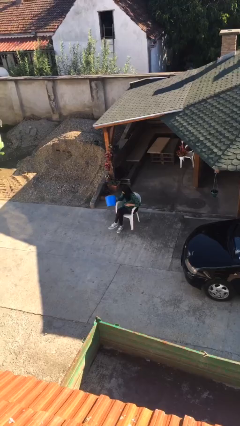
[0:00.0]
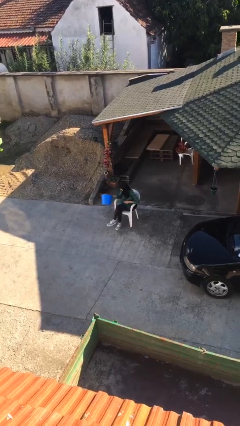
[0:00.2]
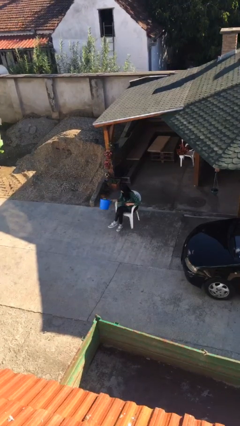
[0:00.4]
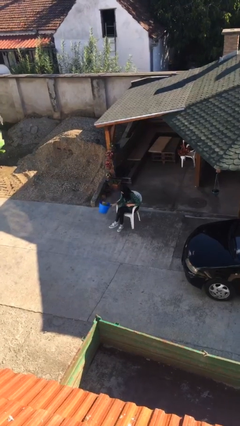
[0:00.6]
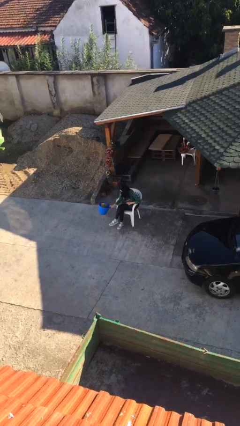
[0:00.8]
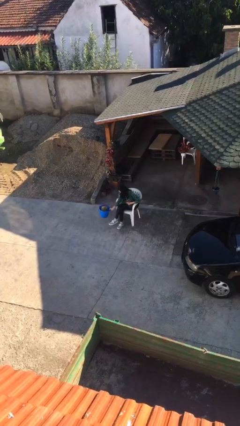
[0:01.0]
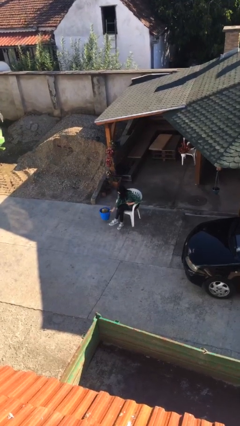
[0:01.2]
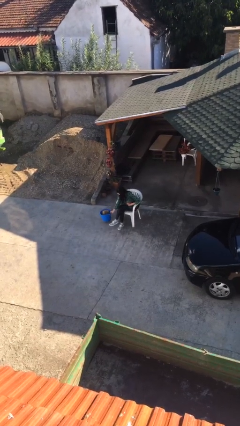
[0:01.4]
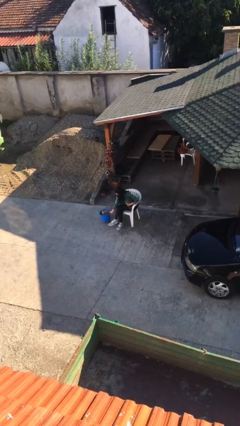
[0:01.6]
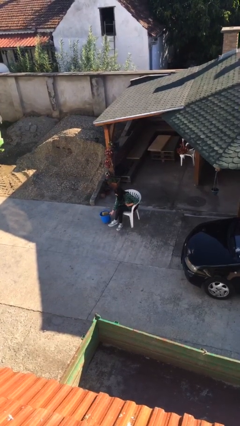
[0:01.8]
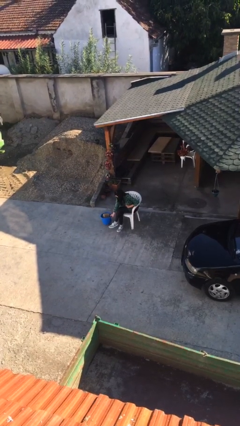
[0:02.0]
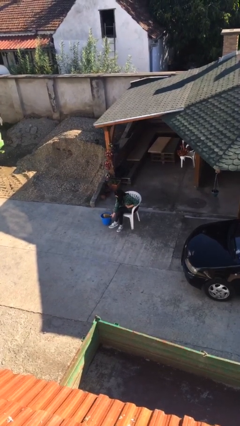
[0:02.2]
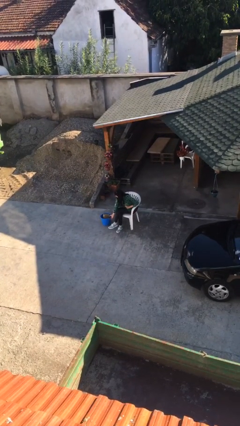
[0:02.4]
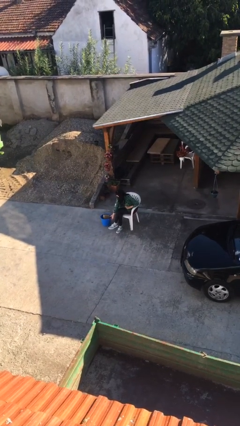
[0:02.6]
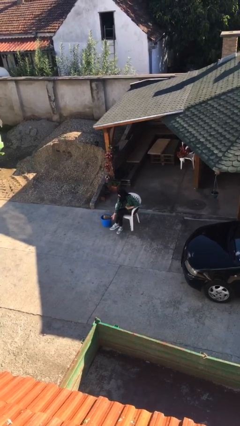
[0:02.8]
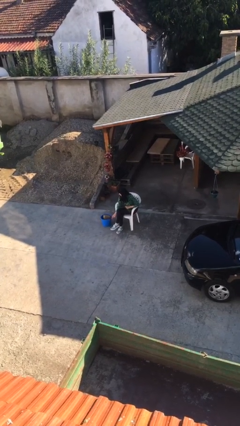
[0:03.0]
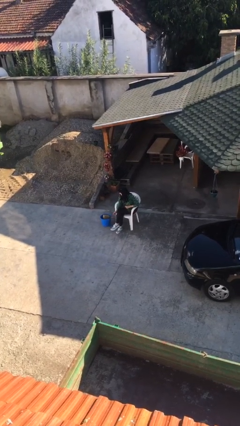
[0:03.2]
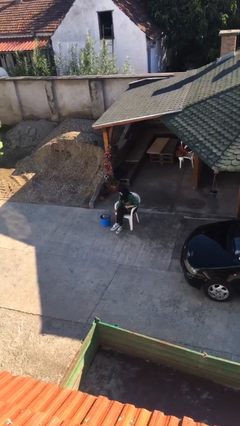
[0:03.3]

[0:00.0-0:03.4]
person puts down object on floor

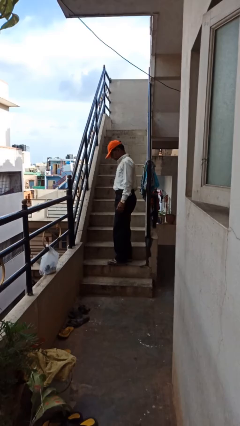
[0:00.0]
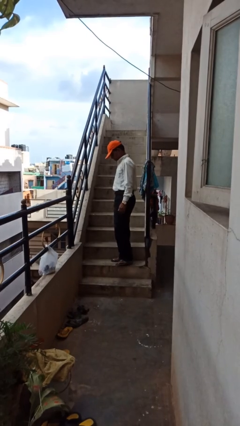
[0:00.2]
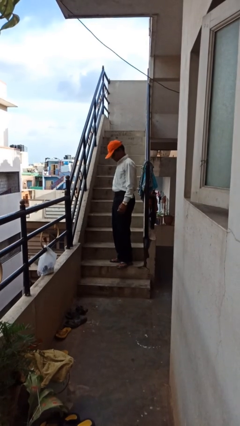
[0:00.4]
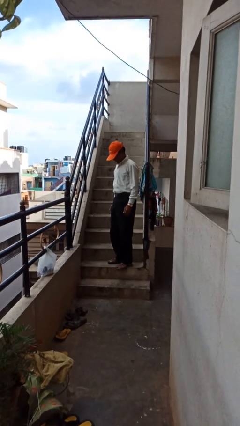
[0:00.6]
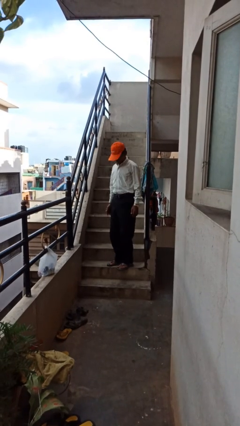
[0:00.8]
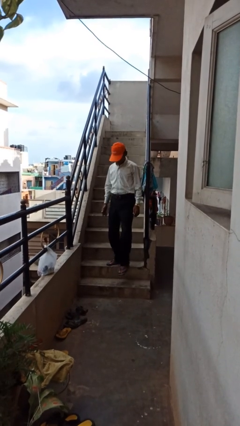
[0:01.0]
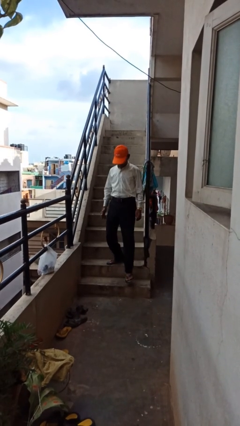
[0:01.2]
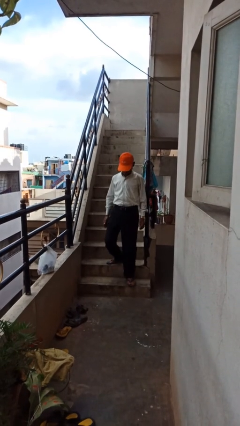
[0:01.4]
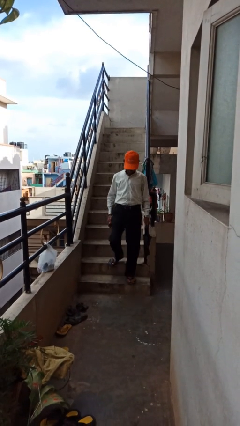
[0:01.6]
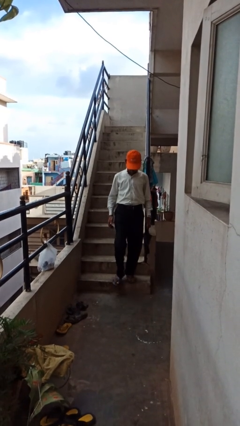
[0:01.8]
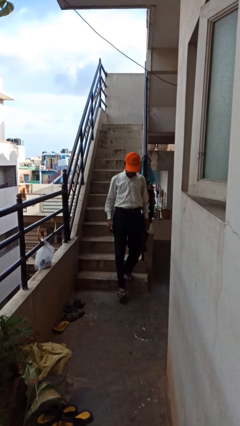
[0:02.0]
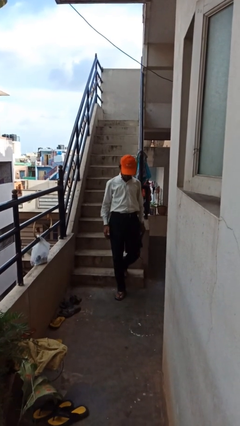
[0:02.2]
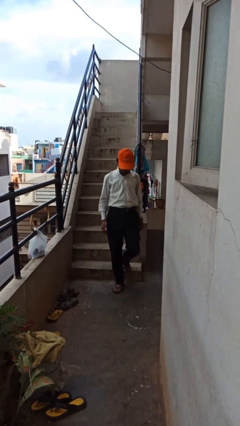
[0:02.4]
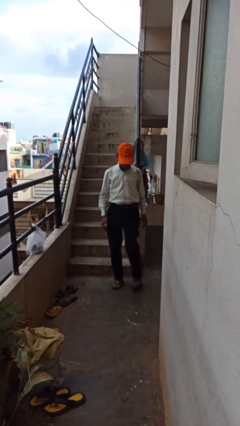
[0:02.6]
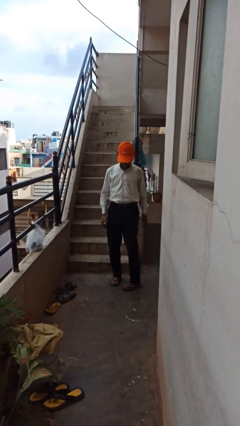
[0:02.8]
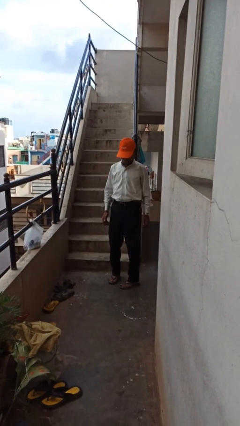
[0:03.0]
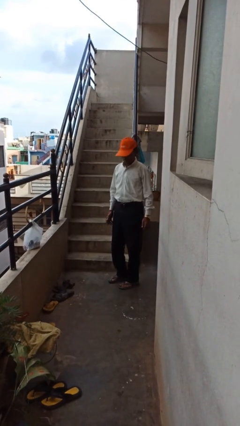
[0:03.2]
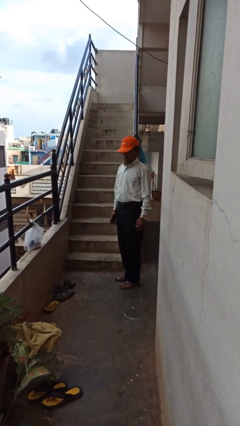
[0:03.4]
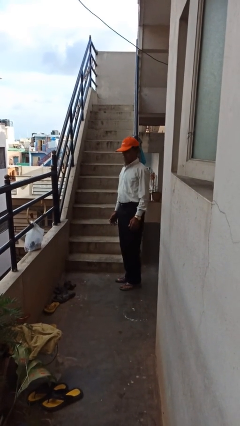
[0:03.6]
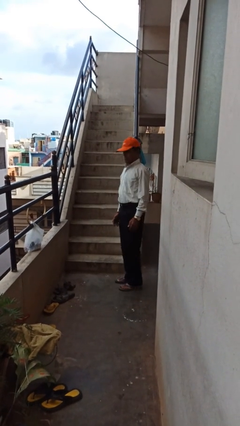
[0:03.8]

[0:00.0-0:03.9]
person climbs down stairs

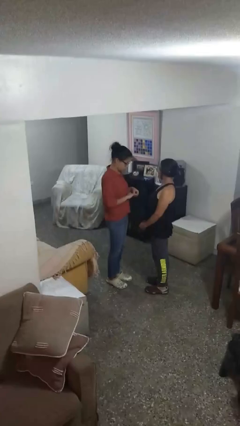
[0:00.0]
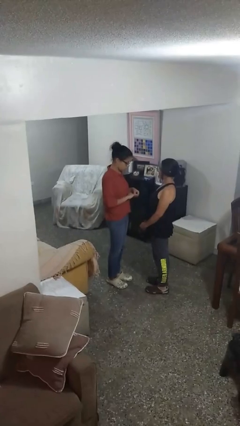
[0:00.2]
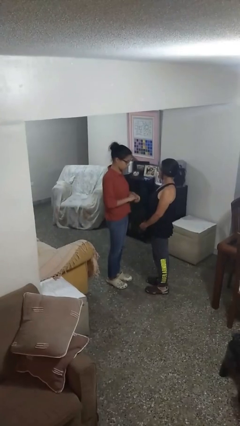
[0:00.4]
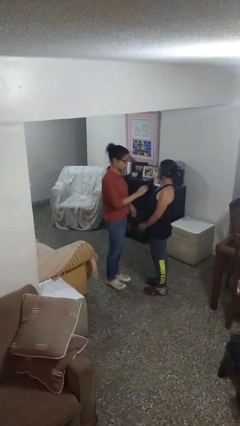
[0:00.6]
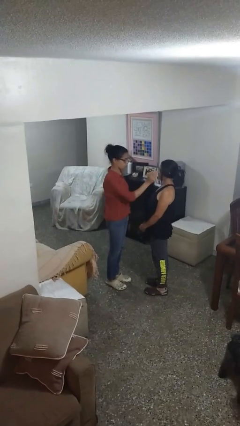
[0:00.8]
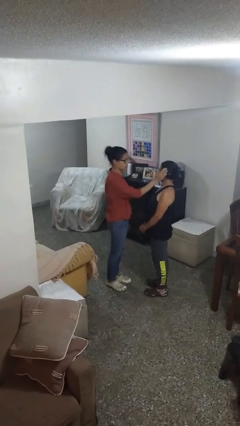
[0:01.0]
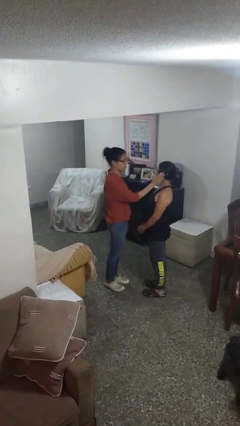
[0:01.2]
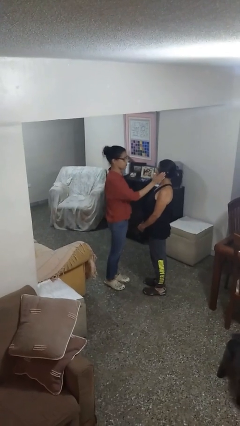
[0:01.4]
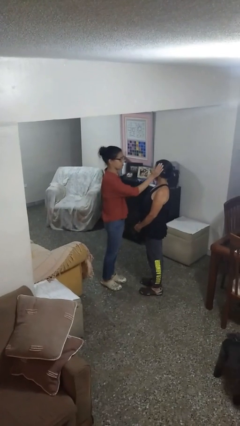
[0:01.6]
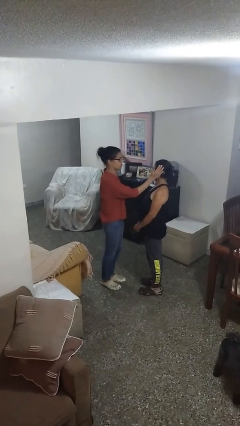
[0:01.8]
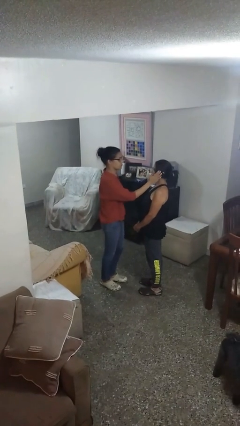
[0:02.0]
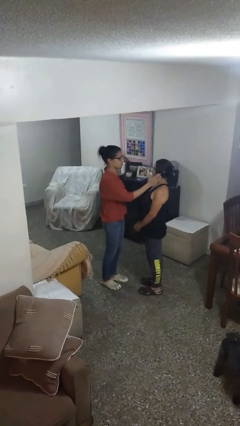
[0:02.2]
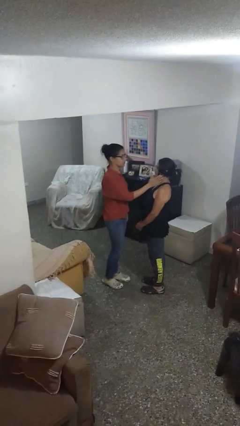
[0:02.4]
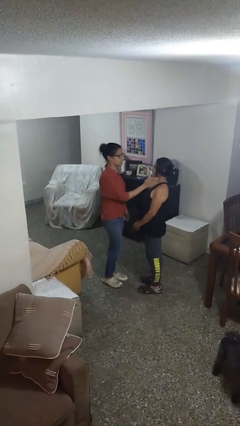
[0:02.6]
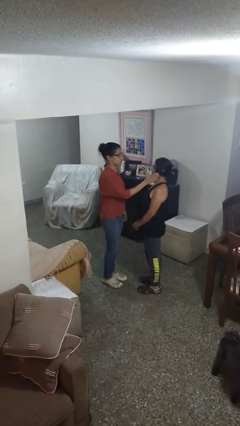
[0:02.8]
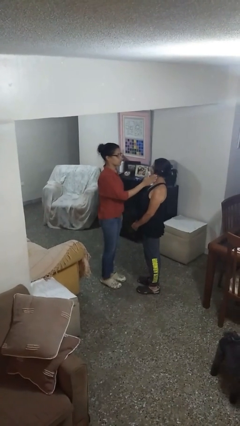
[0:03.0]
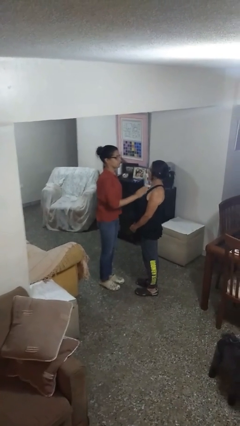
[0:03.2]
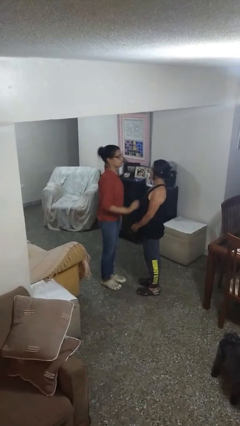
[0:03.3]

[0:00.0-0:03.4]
person touches face of person

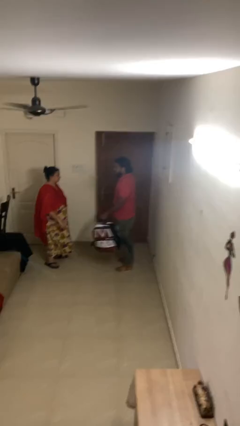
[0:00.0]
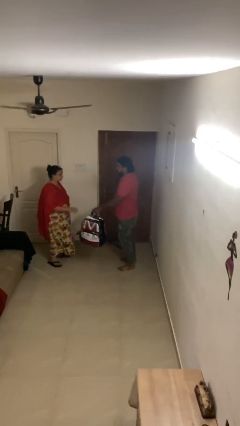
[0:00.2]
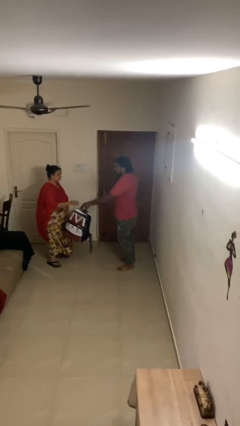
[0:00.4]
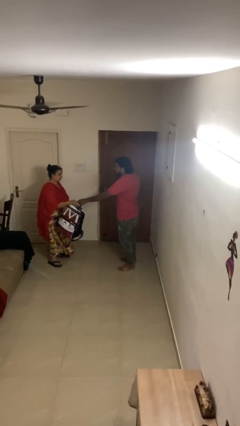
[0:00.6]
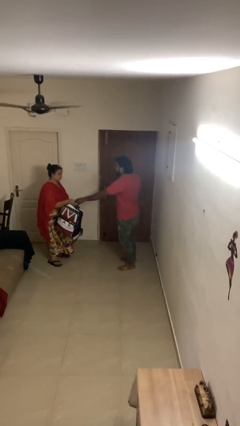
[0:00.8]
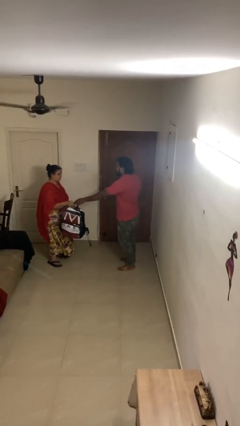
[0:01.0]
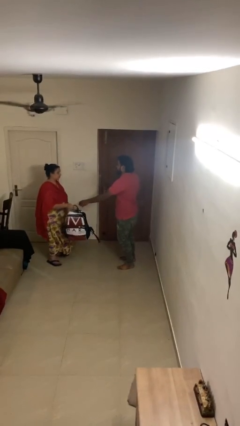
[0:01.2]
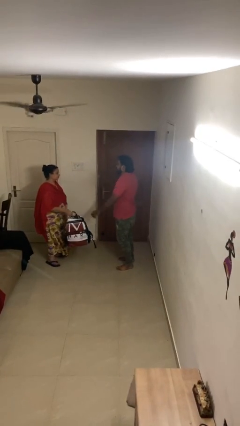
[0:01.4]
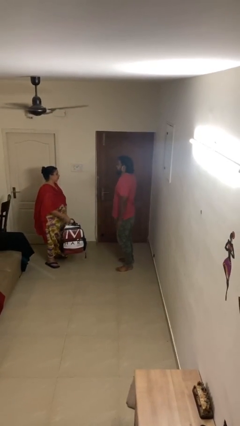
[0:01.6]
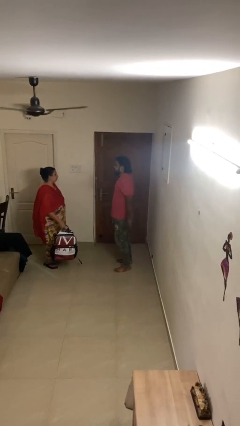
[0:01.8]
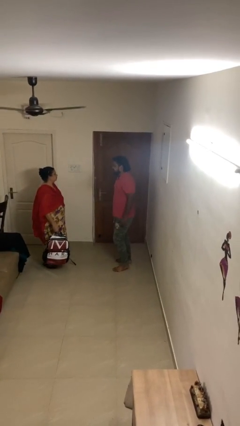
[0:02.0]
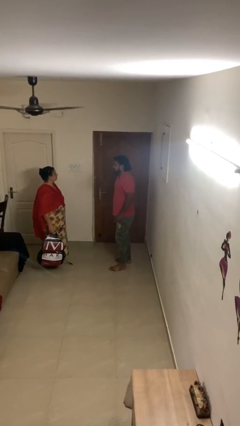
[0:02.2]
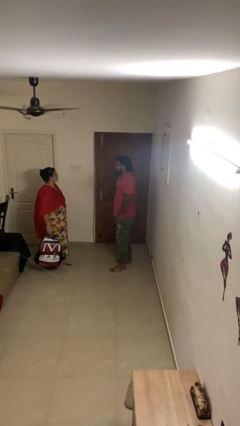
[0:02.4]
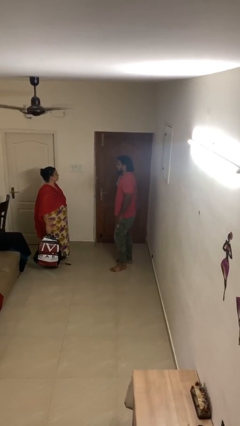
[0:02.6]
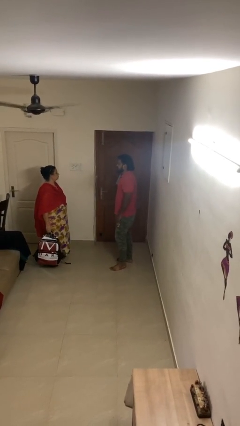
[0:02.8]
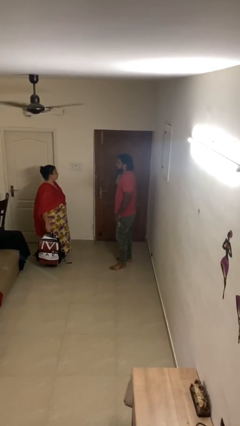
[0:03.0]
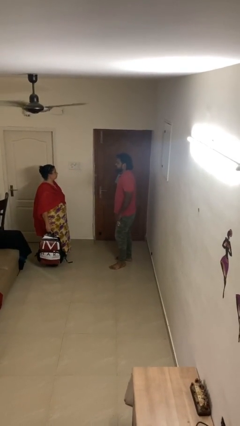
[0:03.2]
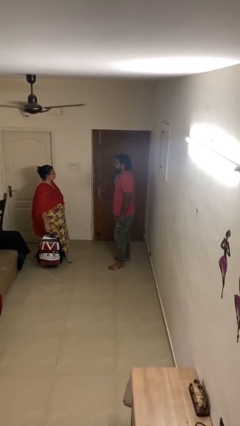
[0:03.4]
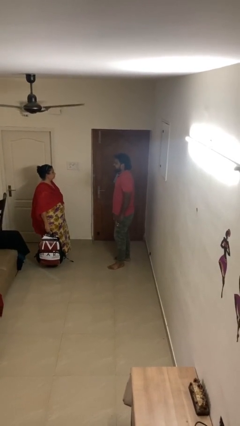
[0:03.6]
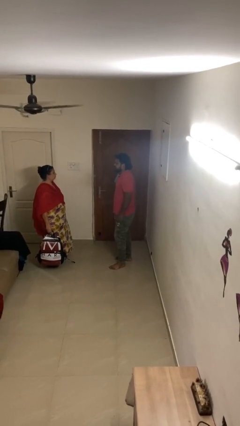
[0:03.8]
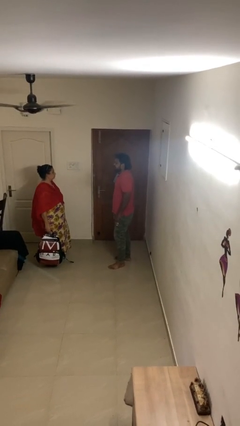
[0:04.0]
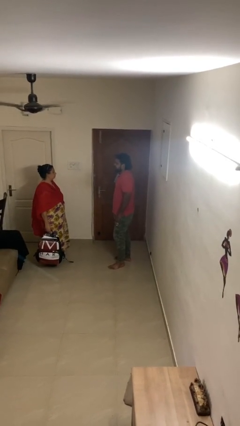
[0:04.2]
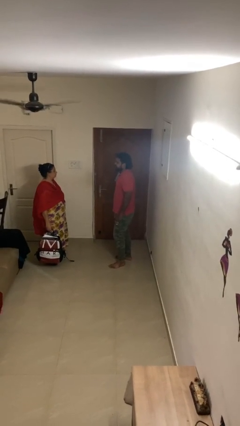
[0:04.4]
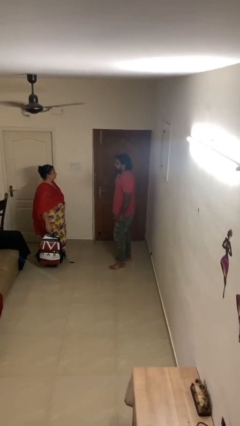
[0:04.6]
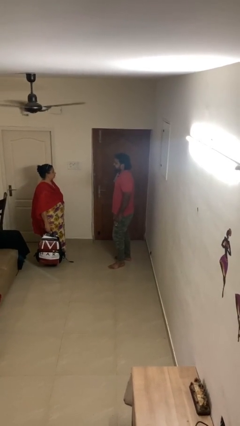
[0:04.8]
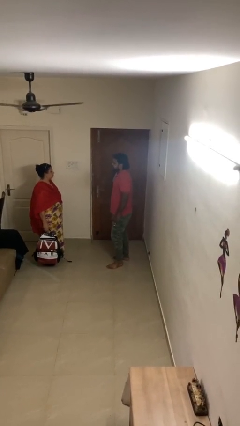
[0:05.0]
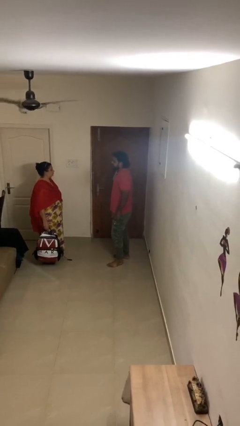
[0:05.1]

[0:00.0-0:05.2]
person transfers object to person

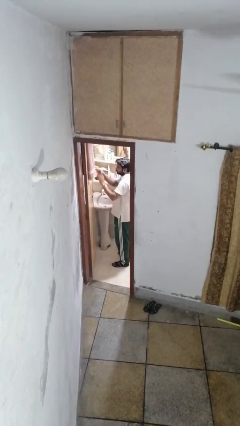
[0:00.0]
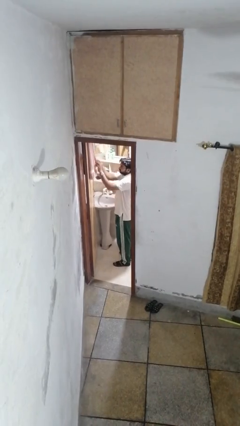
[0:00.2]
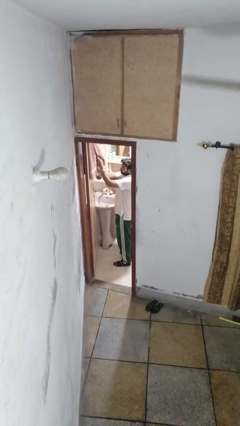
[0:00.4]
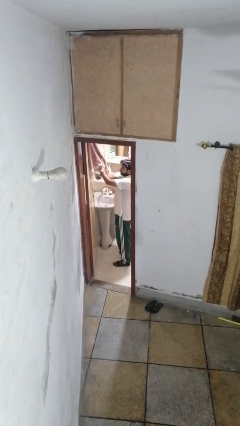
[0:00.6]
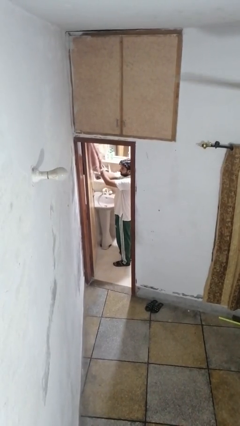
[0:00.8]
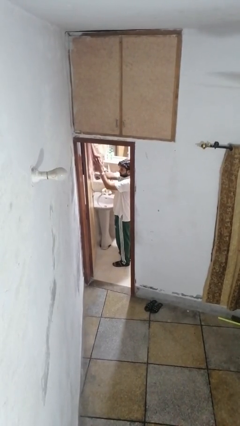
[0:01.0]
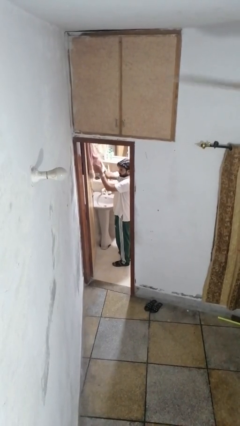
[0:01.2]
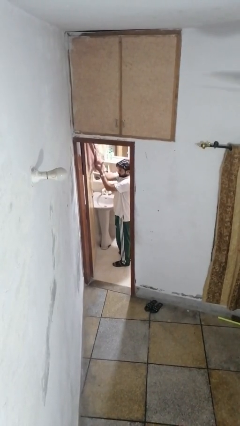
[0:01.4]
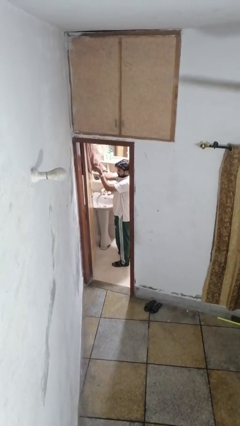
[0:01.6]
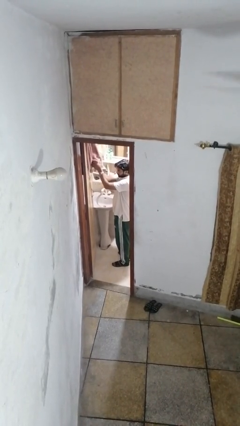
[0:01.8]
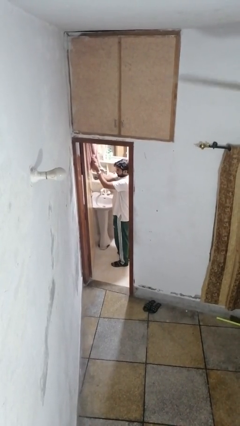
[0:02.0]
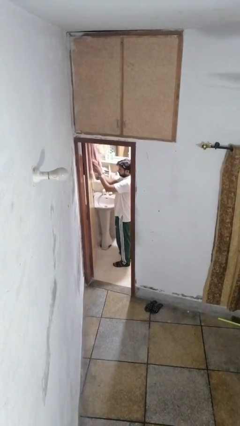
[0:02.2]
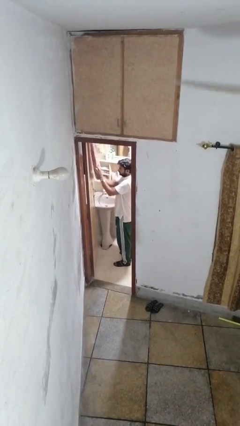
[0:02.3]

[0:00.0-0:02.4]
person dries hands with towel
